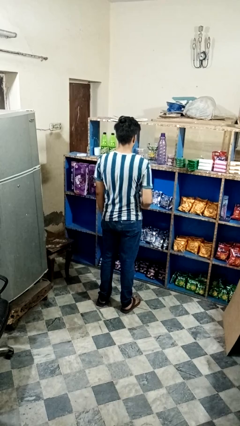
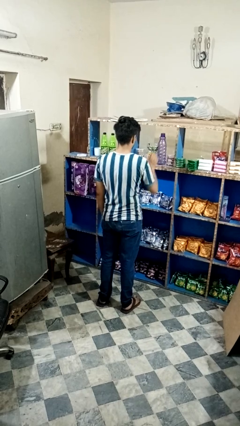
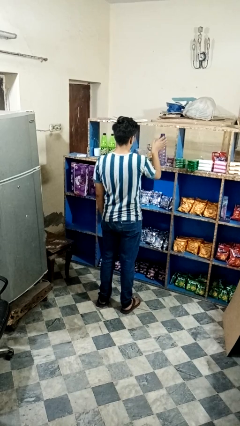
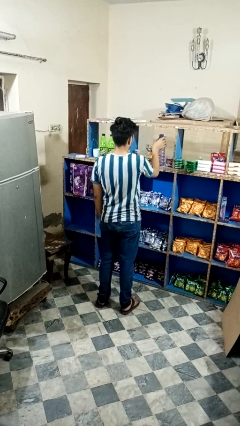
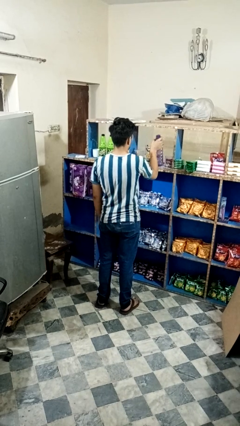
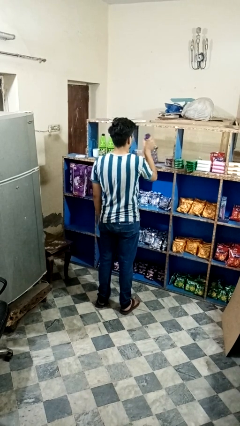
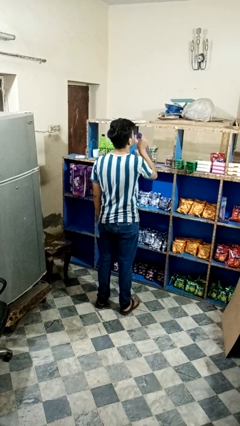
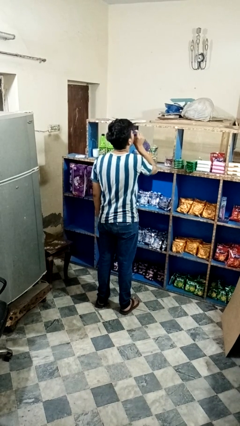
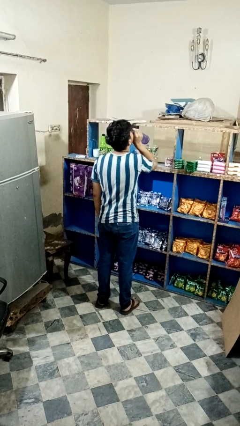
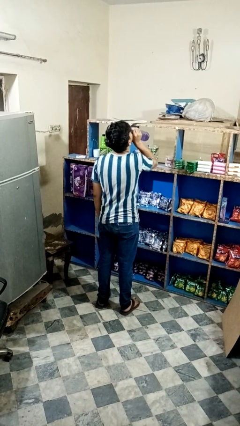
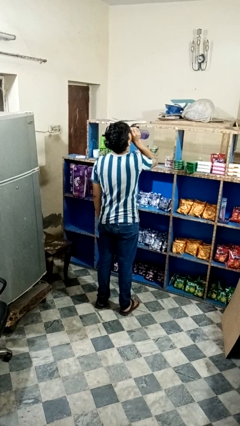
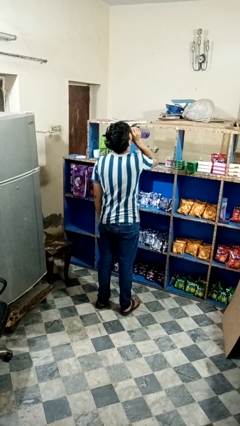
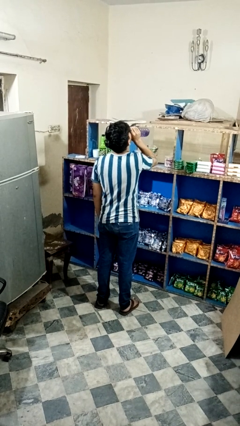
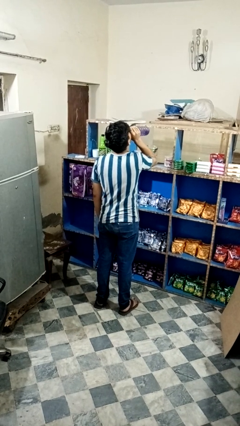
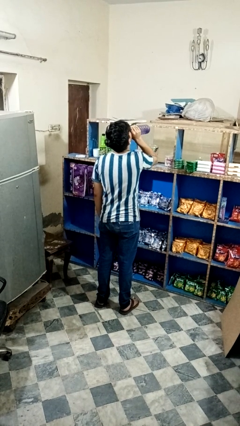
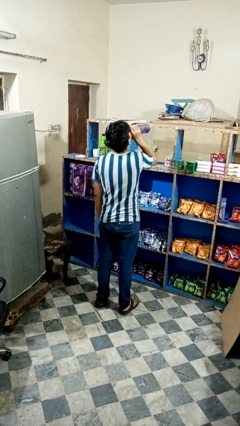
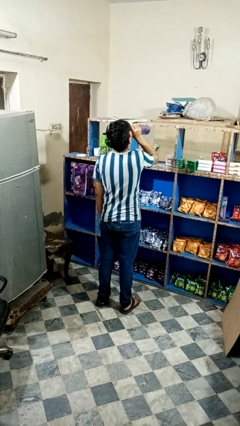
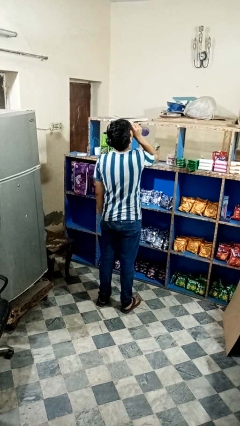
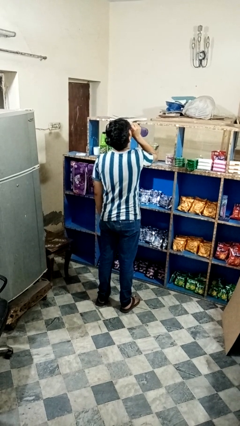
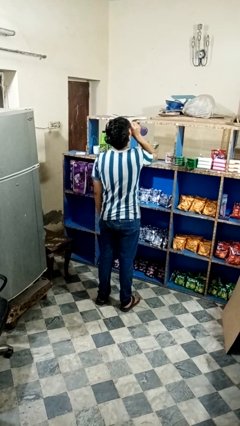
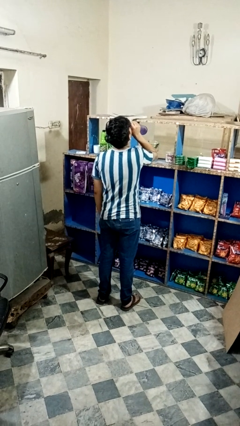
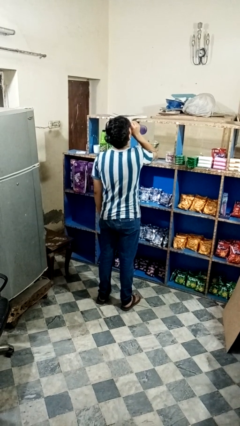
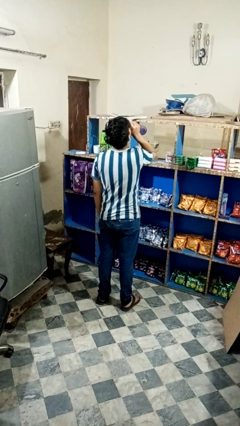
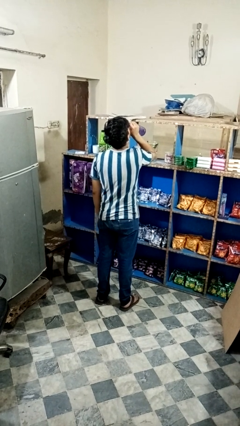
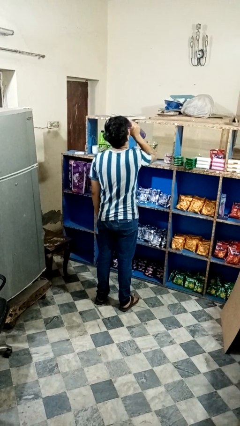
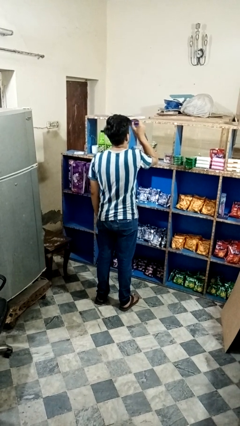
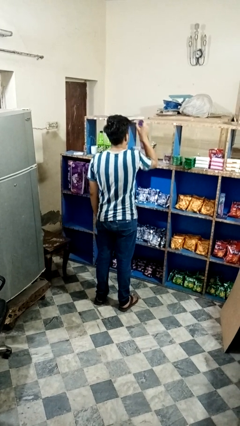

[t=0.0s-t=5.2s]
person drinks from bottle

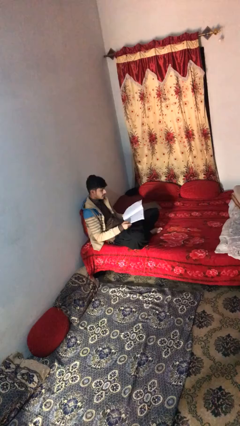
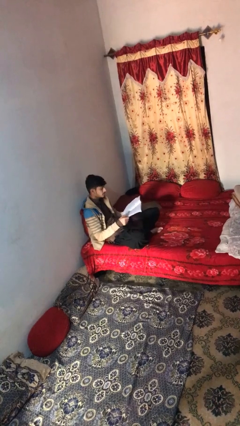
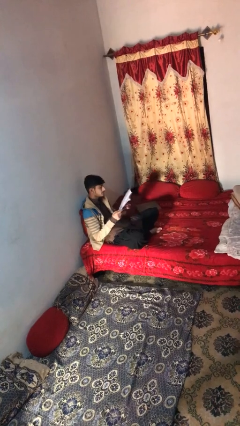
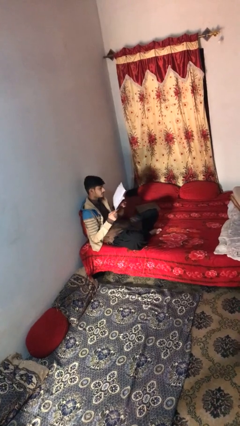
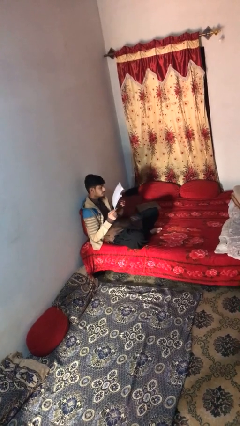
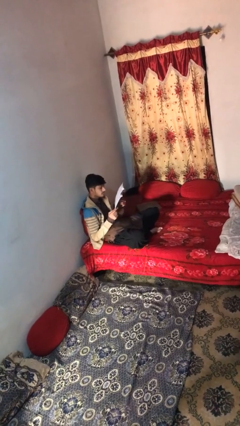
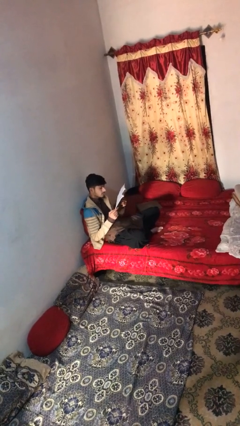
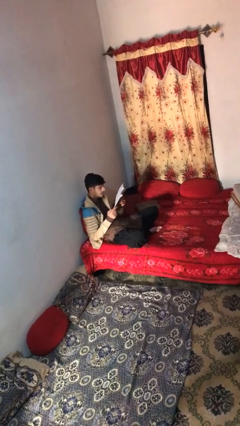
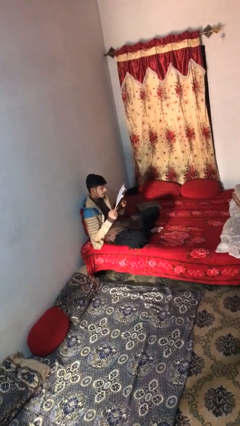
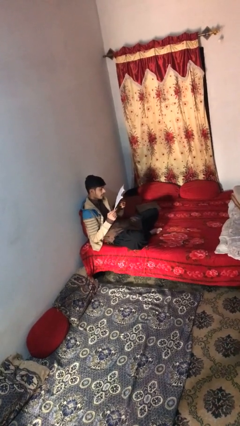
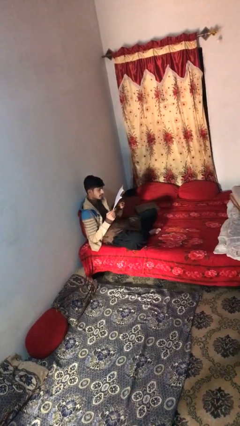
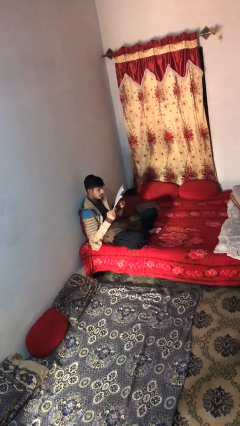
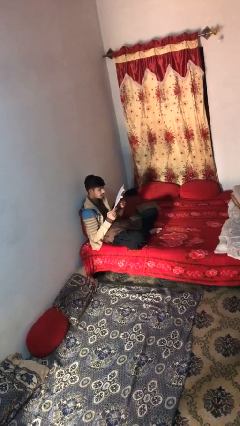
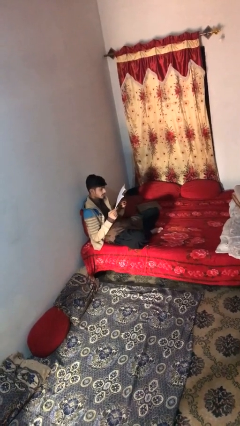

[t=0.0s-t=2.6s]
person reads document

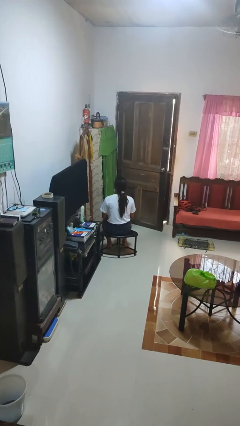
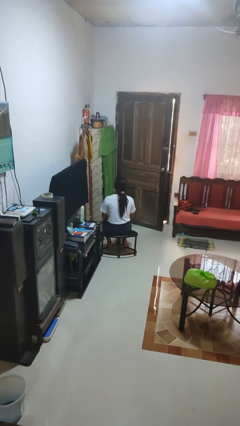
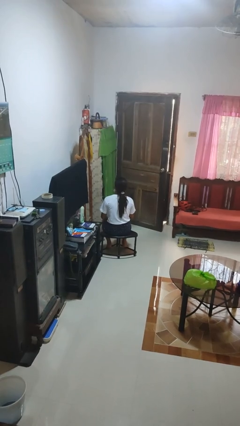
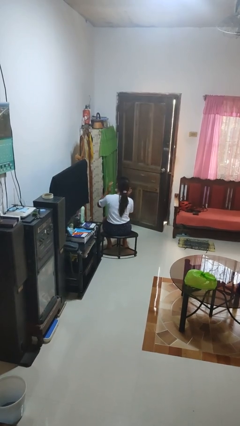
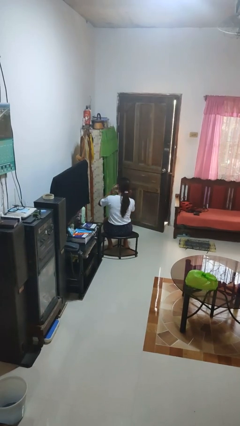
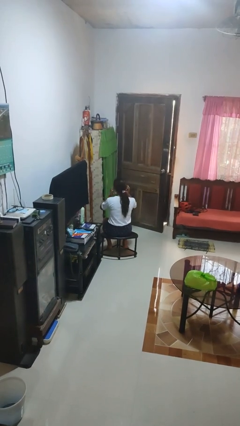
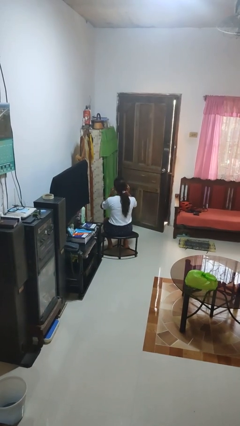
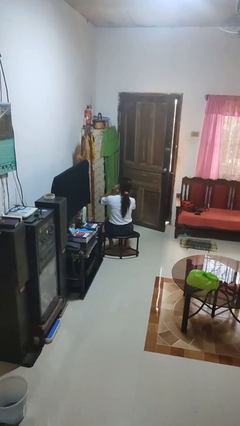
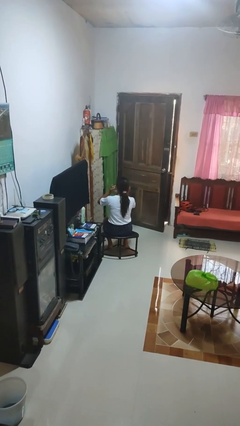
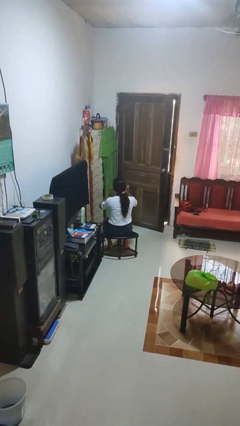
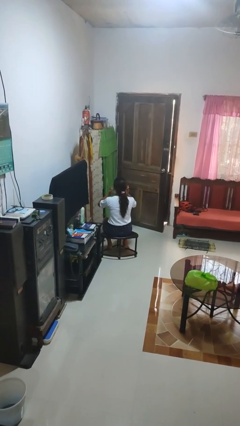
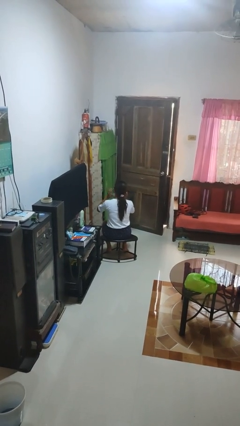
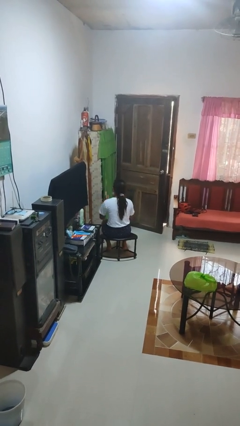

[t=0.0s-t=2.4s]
person puts fingers in ear

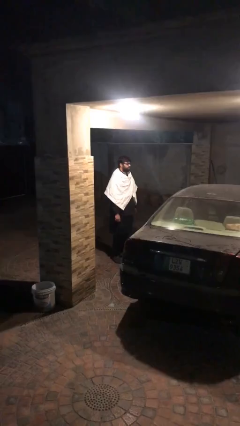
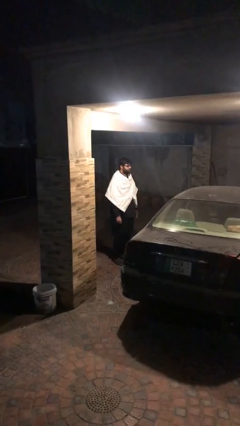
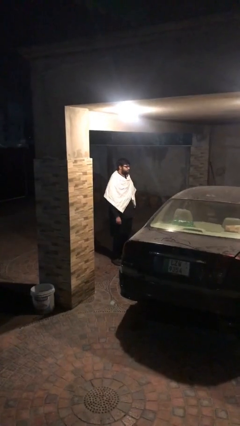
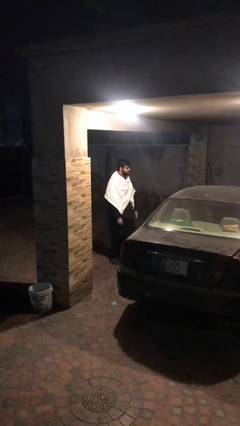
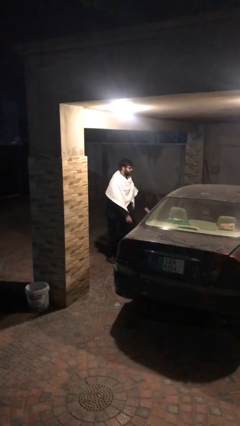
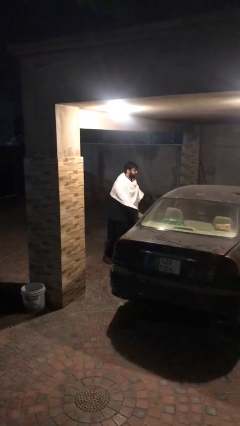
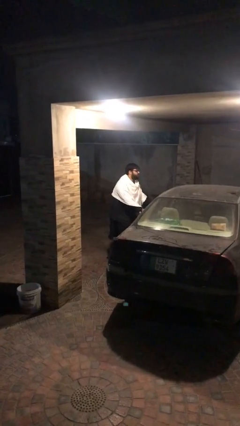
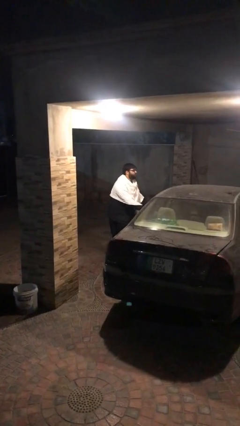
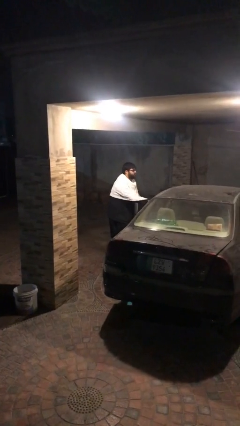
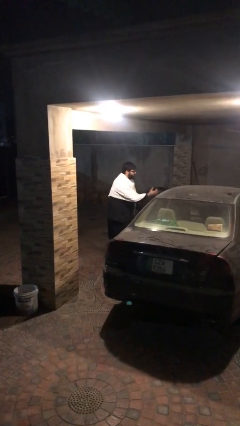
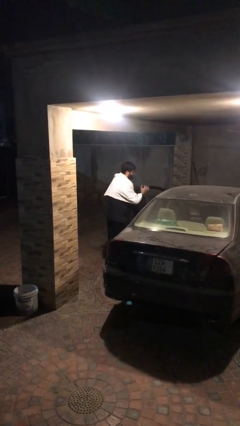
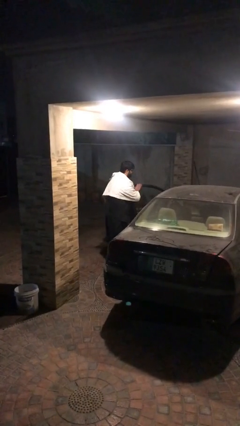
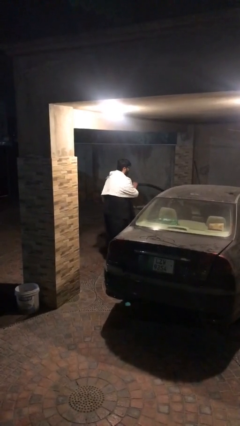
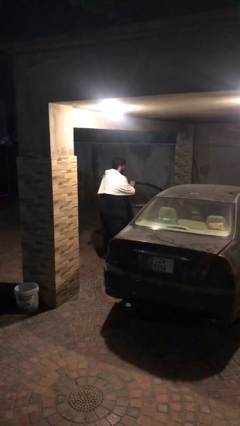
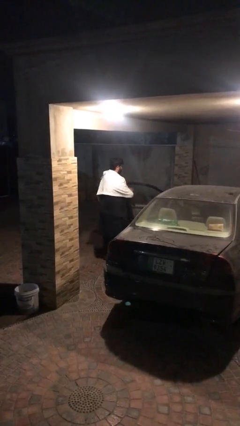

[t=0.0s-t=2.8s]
person opens car door

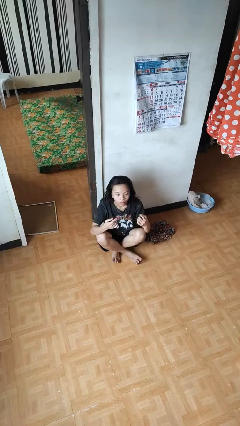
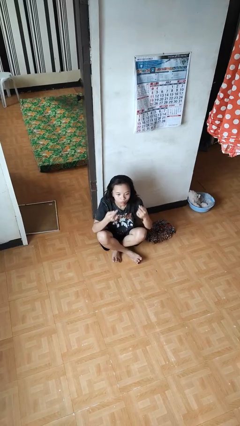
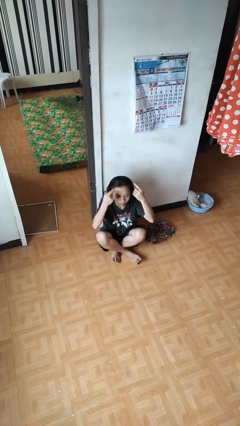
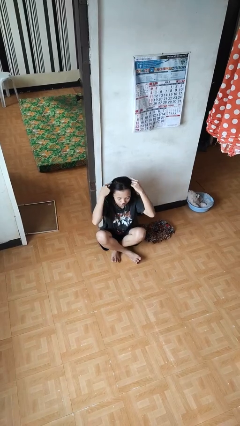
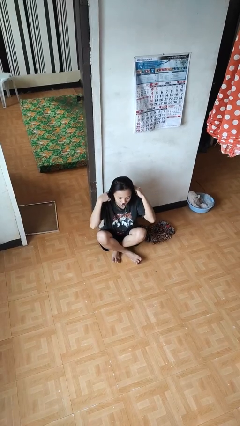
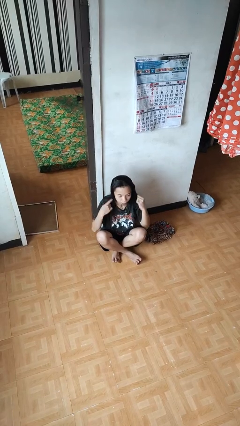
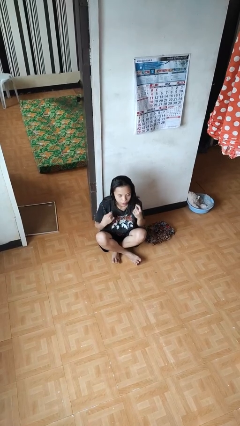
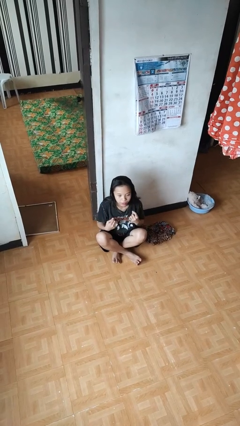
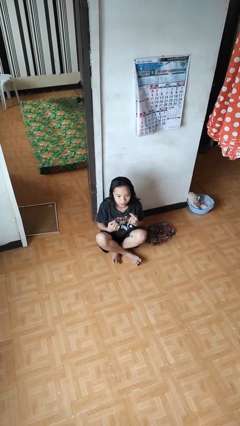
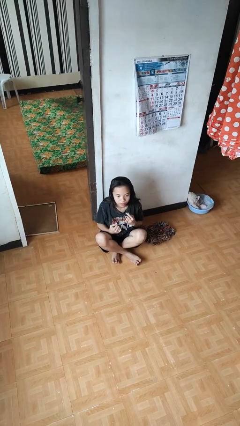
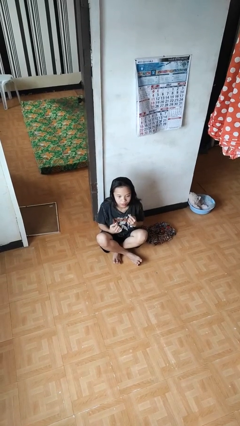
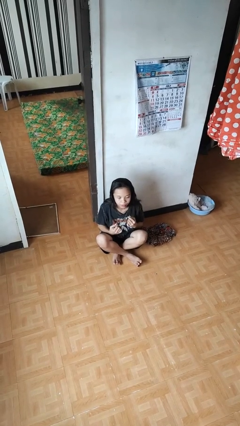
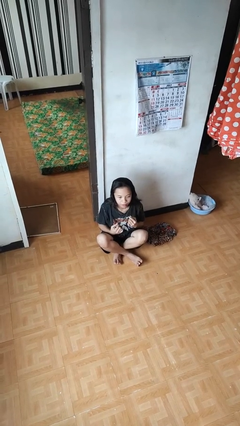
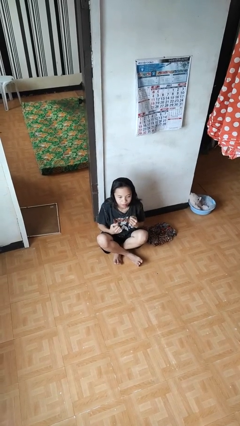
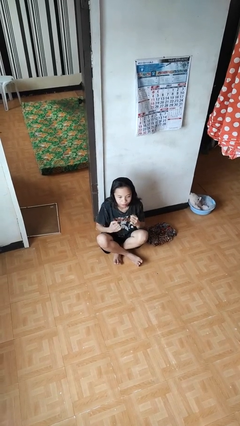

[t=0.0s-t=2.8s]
person puts on necklace

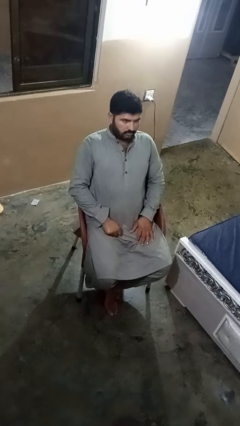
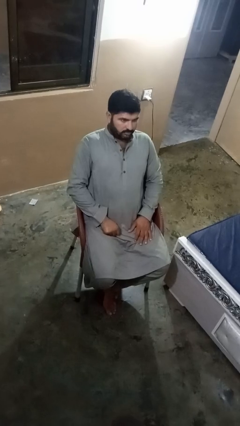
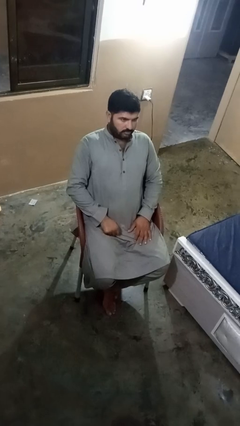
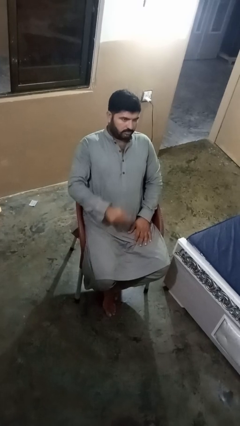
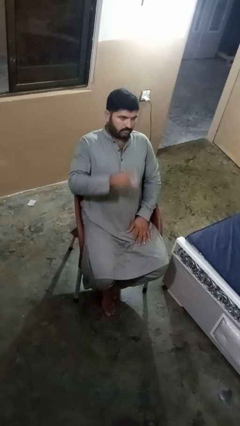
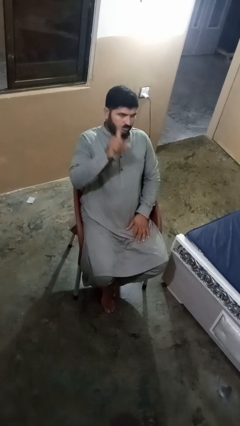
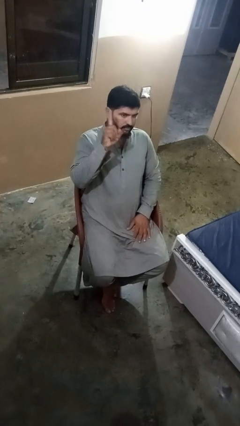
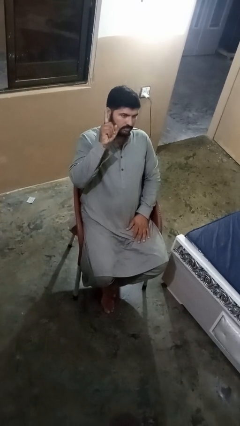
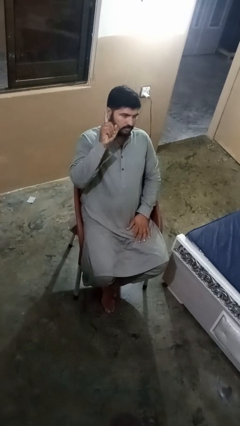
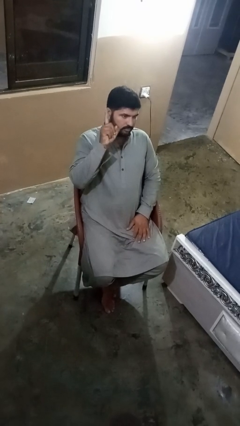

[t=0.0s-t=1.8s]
person gestures number one
